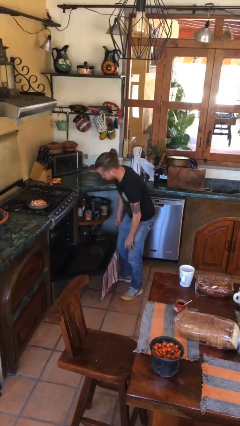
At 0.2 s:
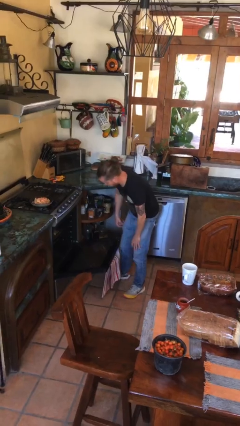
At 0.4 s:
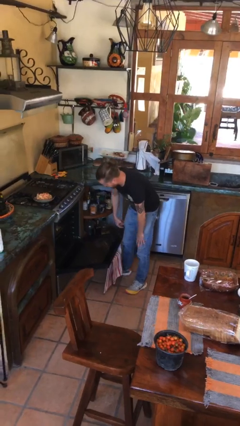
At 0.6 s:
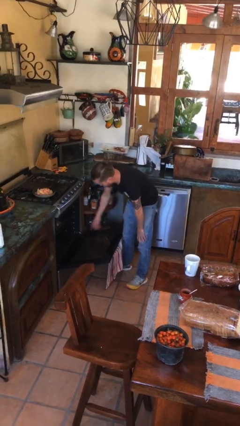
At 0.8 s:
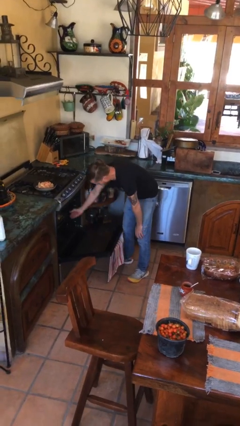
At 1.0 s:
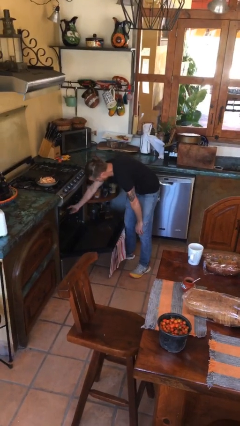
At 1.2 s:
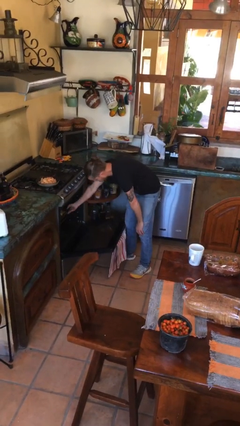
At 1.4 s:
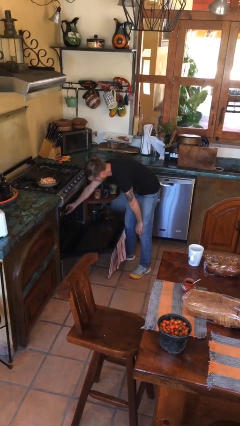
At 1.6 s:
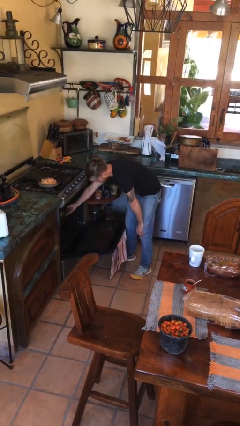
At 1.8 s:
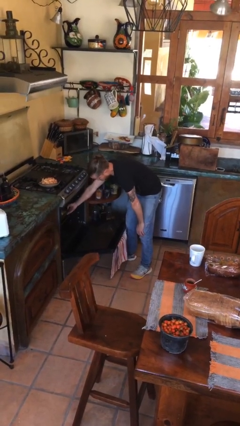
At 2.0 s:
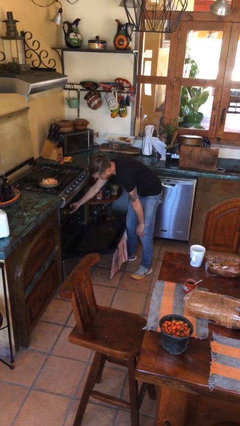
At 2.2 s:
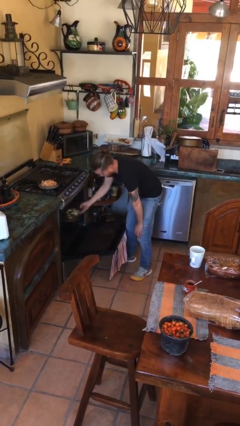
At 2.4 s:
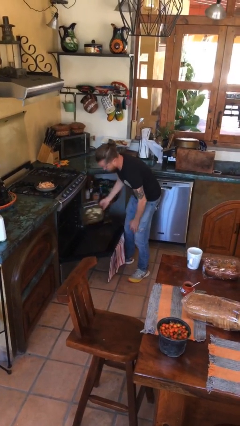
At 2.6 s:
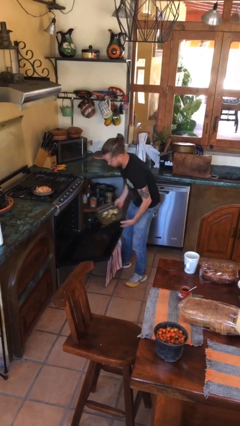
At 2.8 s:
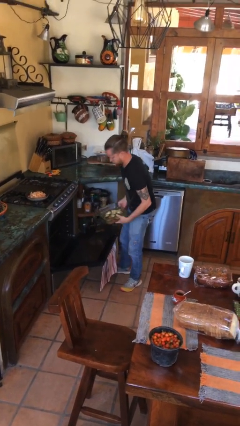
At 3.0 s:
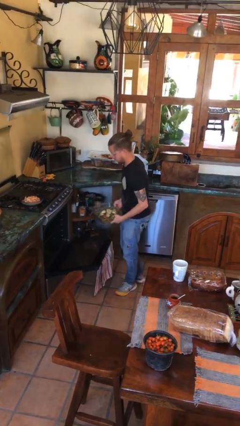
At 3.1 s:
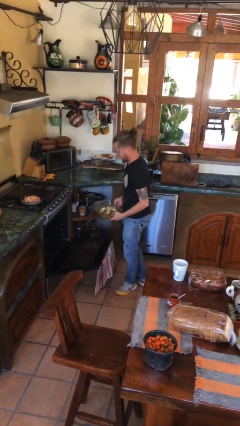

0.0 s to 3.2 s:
person takes object from oven

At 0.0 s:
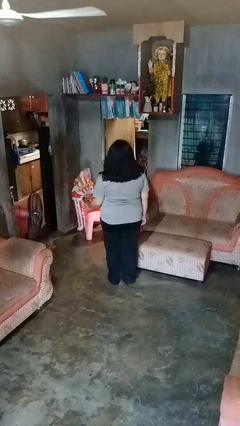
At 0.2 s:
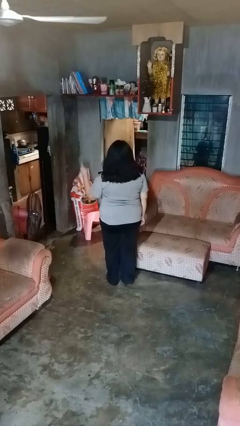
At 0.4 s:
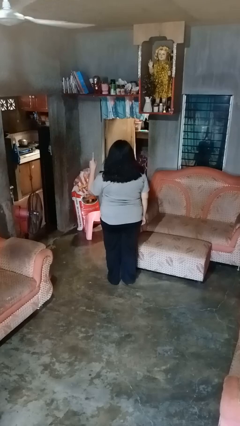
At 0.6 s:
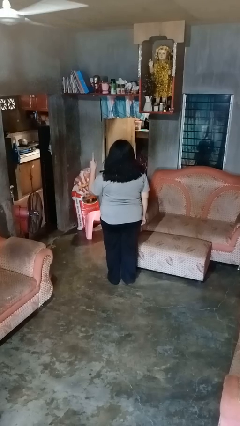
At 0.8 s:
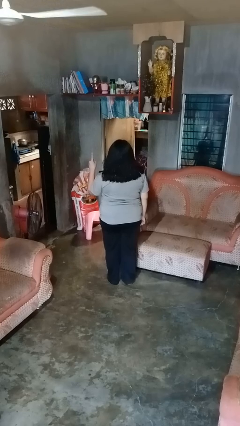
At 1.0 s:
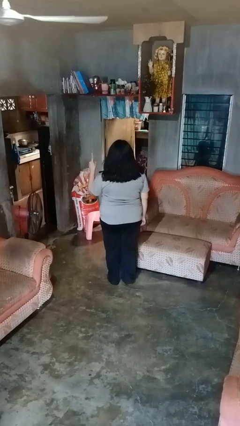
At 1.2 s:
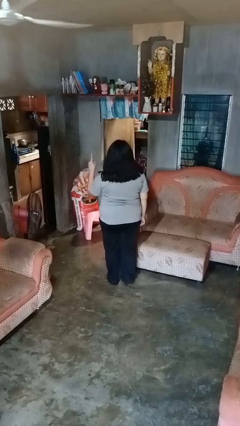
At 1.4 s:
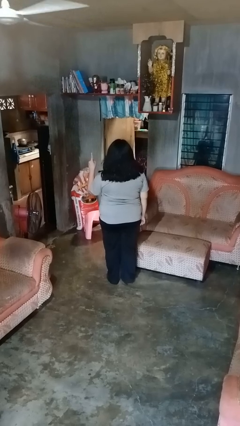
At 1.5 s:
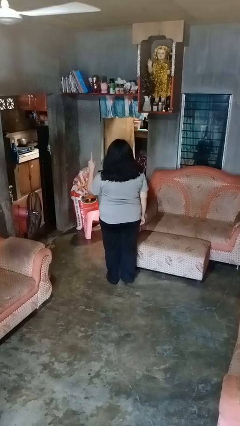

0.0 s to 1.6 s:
person gestures number one

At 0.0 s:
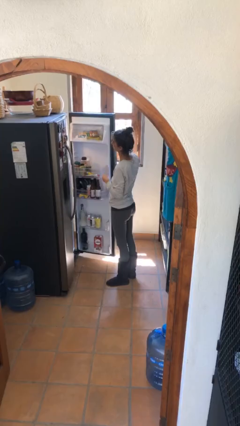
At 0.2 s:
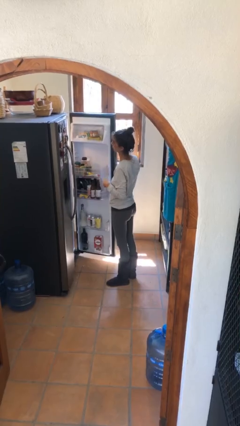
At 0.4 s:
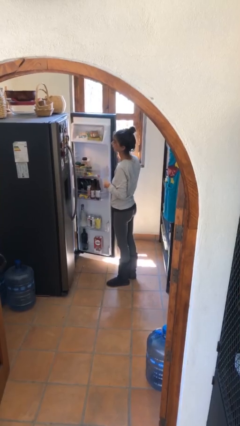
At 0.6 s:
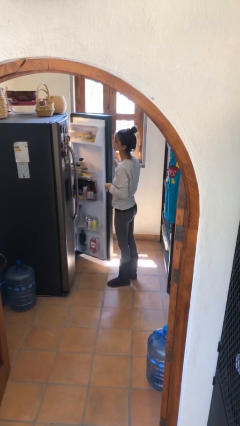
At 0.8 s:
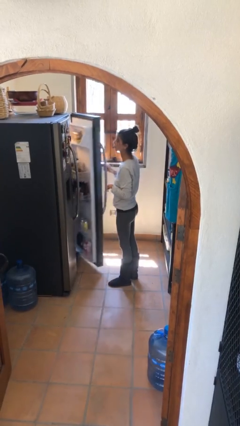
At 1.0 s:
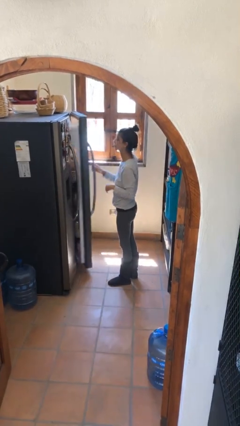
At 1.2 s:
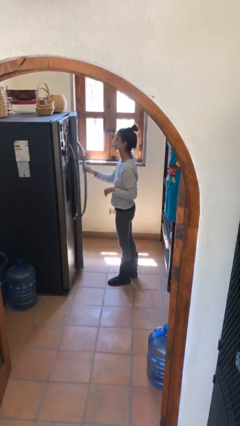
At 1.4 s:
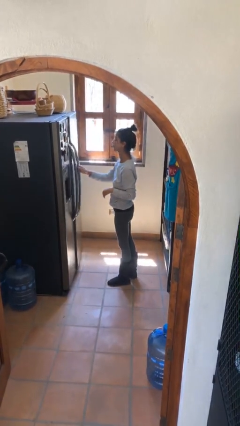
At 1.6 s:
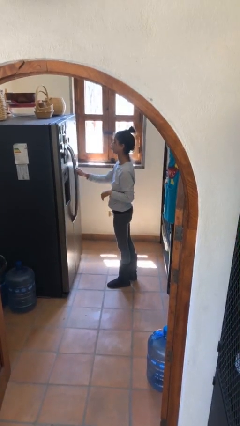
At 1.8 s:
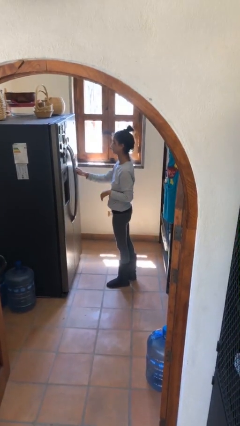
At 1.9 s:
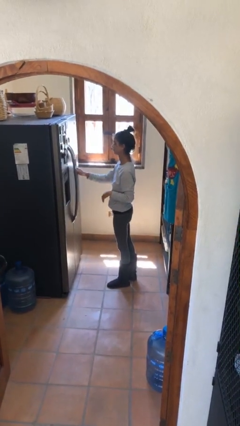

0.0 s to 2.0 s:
person closes refrigerator

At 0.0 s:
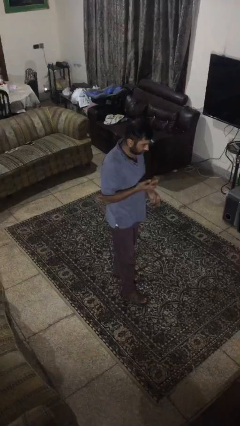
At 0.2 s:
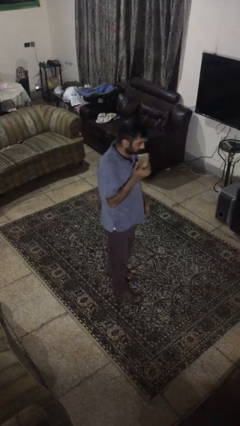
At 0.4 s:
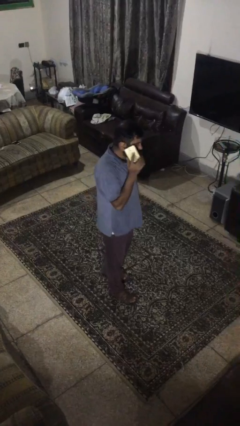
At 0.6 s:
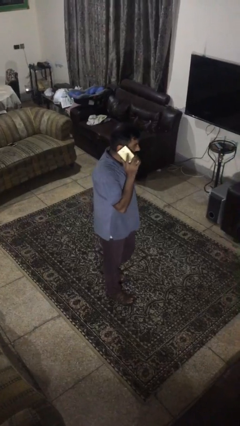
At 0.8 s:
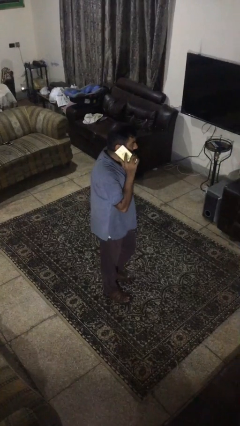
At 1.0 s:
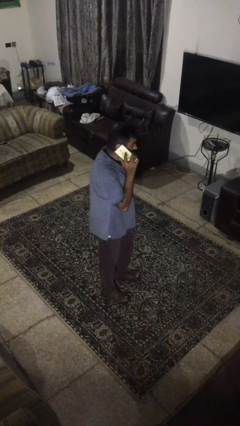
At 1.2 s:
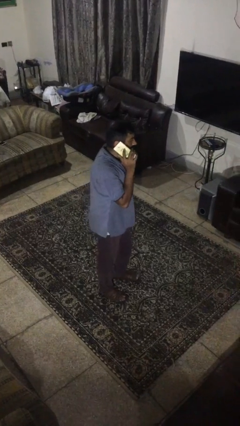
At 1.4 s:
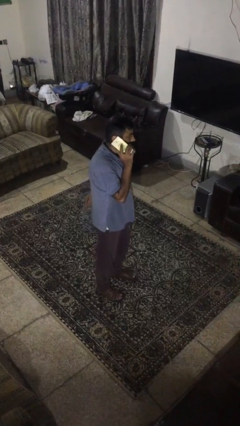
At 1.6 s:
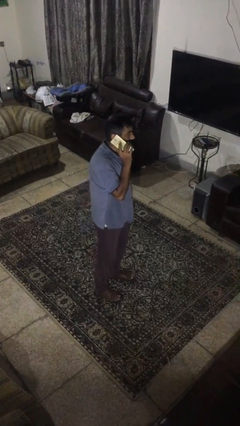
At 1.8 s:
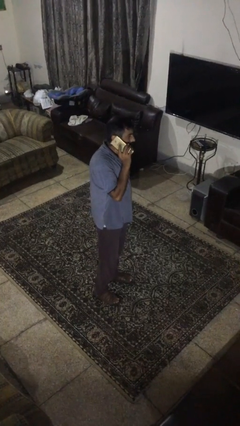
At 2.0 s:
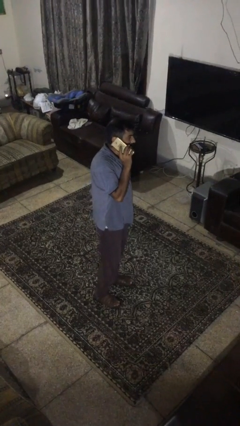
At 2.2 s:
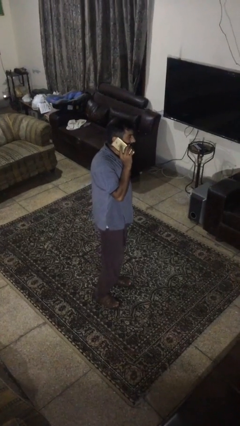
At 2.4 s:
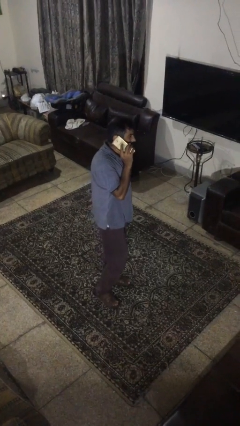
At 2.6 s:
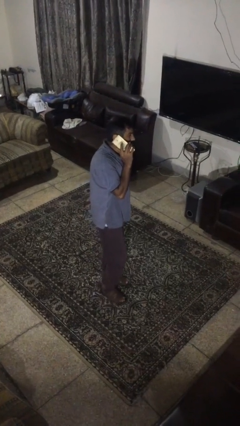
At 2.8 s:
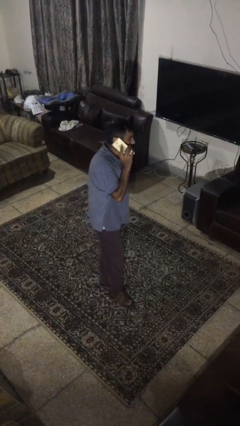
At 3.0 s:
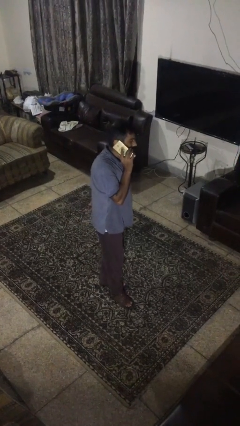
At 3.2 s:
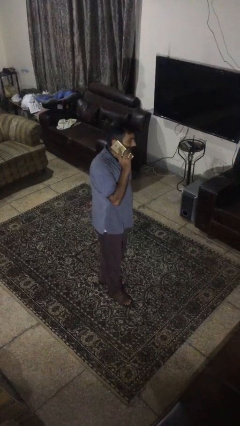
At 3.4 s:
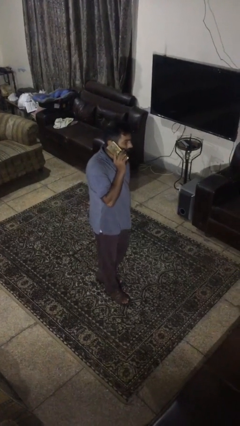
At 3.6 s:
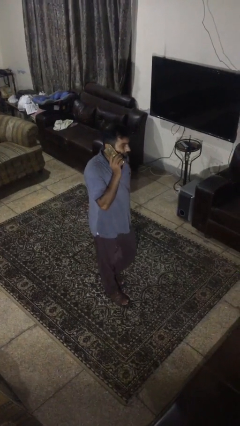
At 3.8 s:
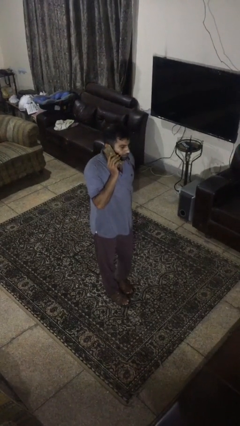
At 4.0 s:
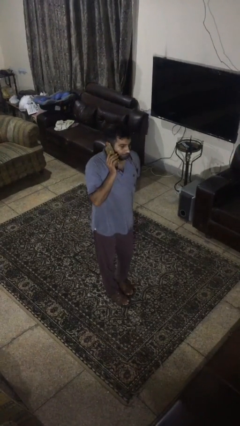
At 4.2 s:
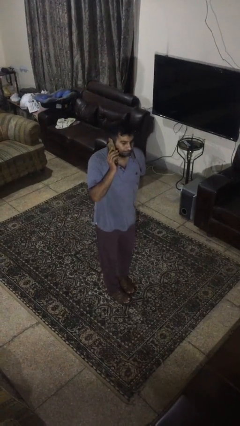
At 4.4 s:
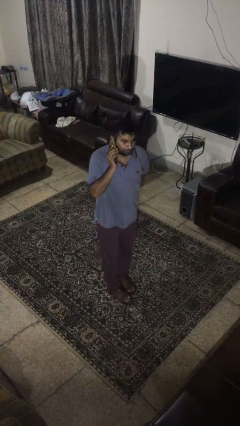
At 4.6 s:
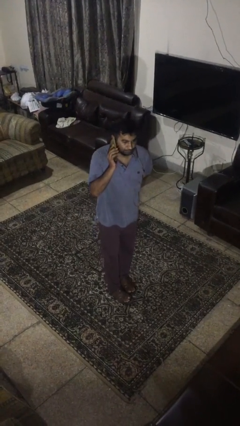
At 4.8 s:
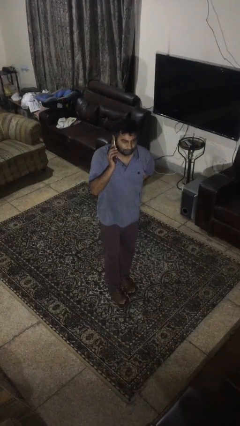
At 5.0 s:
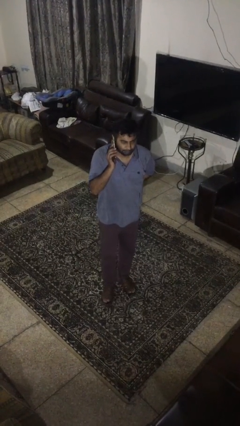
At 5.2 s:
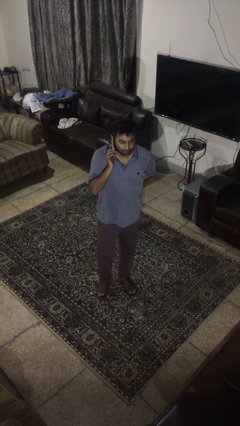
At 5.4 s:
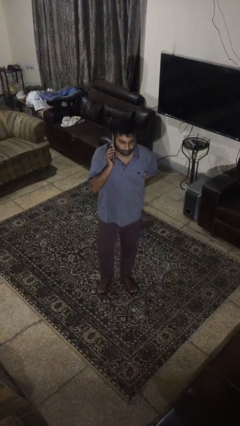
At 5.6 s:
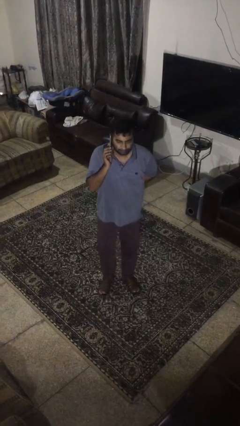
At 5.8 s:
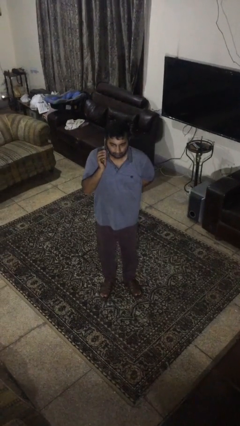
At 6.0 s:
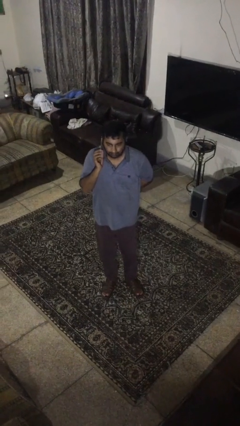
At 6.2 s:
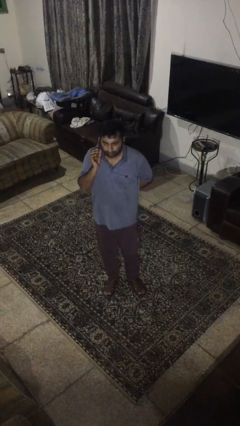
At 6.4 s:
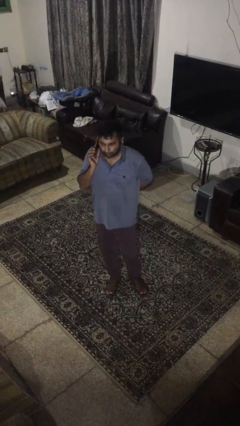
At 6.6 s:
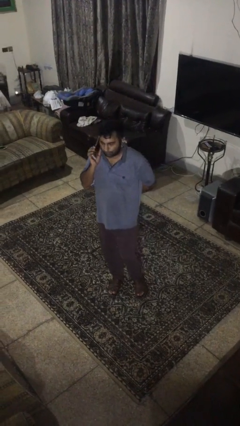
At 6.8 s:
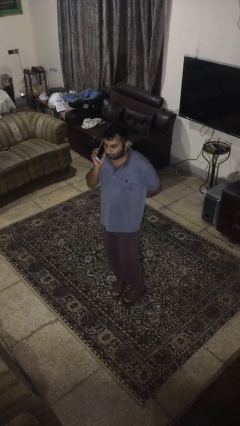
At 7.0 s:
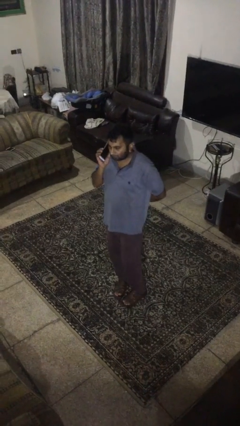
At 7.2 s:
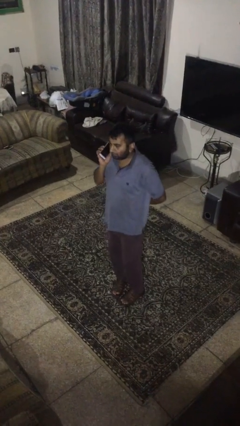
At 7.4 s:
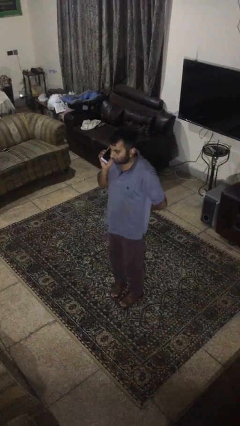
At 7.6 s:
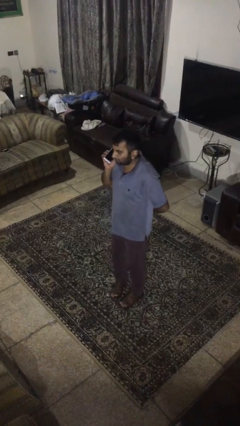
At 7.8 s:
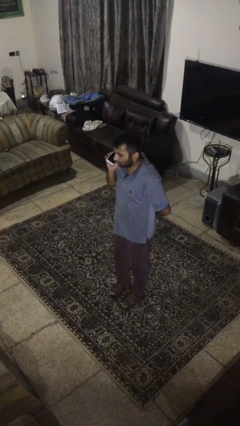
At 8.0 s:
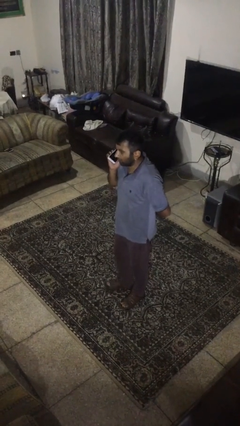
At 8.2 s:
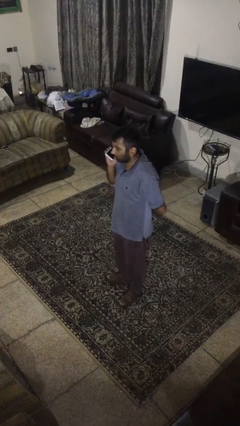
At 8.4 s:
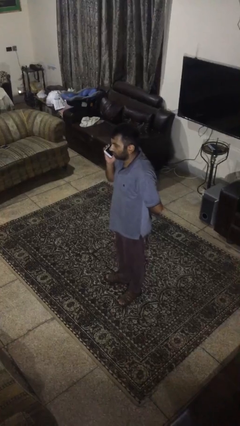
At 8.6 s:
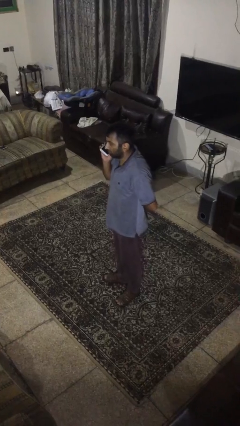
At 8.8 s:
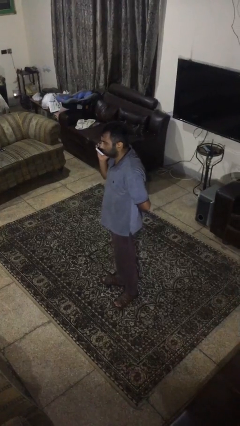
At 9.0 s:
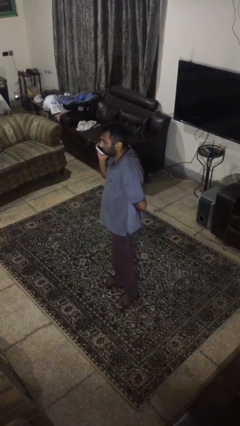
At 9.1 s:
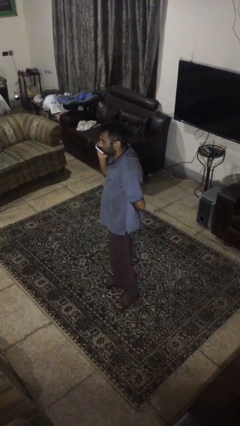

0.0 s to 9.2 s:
person talks on phone

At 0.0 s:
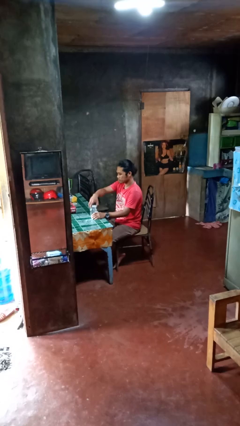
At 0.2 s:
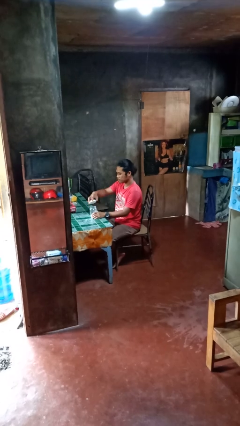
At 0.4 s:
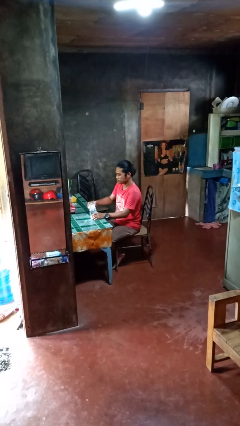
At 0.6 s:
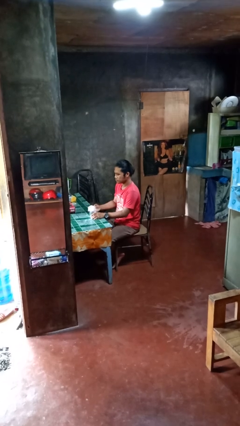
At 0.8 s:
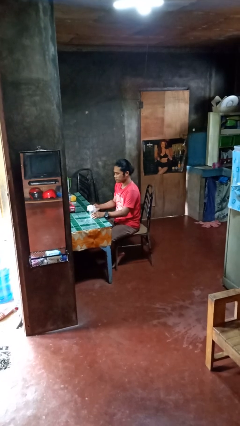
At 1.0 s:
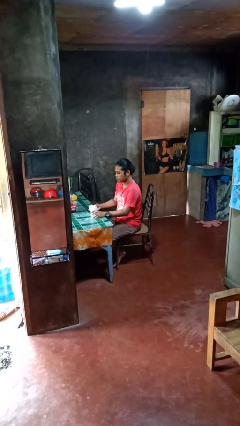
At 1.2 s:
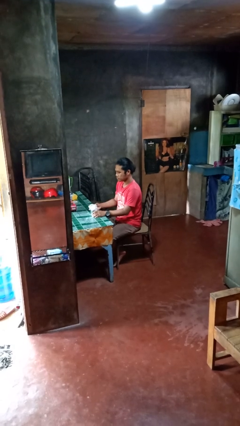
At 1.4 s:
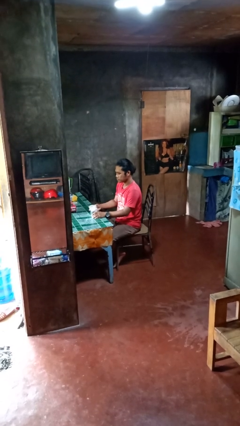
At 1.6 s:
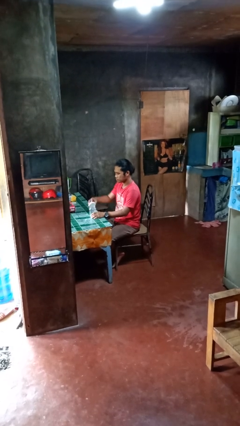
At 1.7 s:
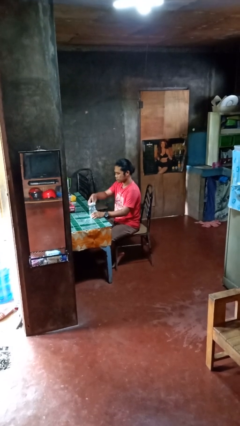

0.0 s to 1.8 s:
person opens jar
